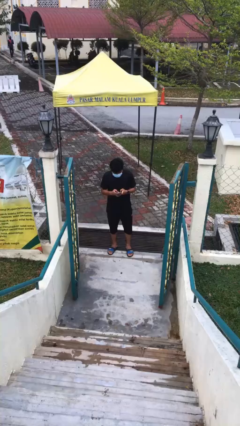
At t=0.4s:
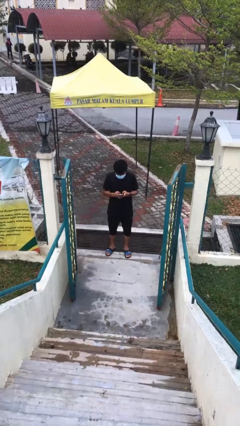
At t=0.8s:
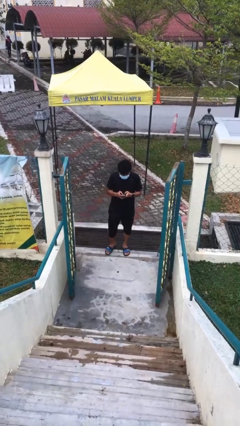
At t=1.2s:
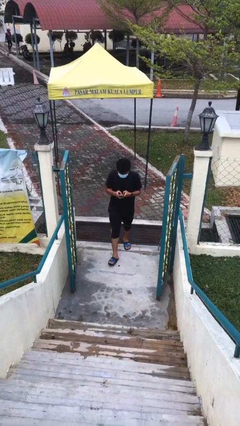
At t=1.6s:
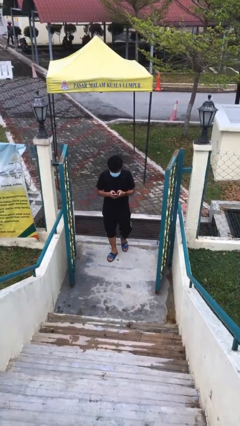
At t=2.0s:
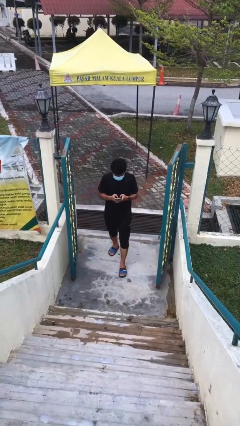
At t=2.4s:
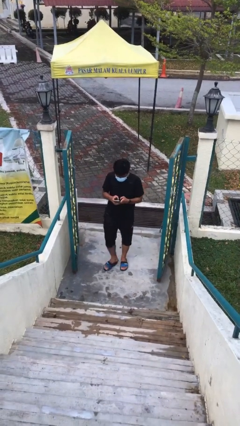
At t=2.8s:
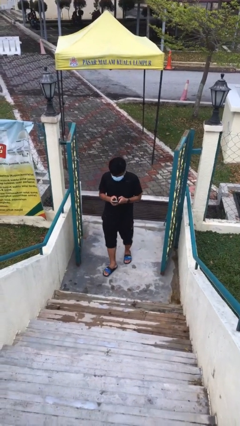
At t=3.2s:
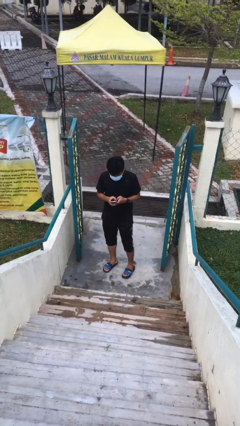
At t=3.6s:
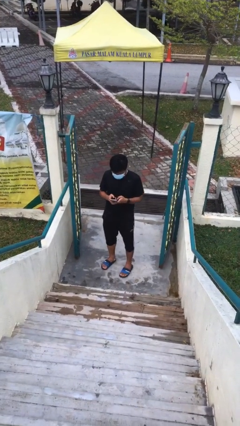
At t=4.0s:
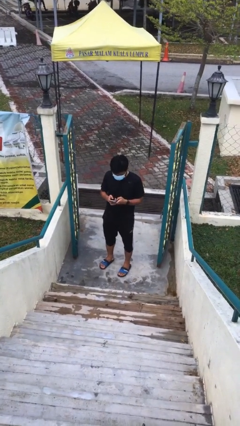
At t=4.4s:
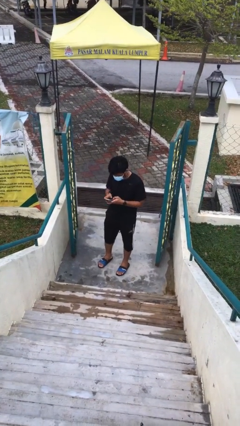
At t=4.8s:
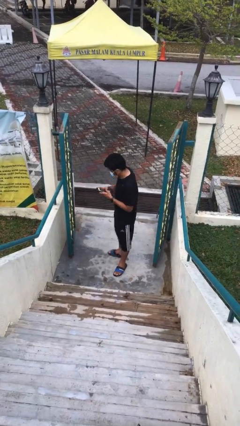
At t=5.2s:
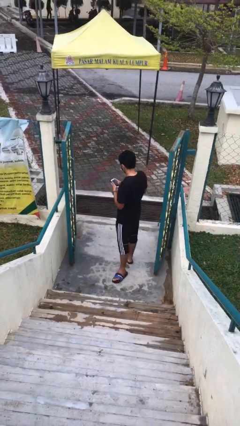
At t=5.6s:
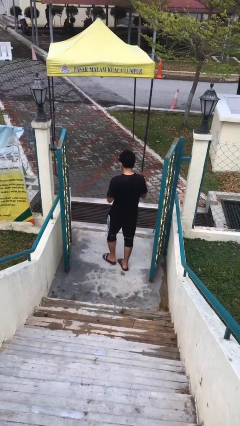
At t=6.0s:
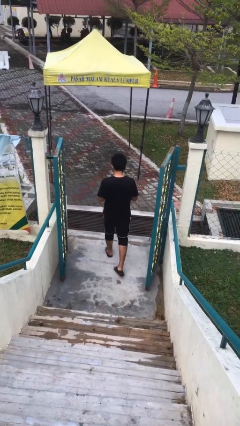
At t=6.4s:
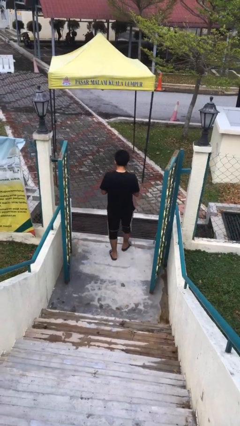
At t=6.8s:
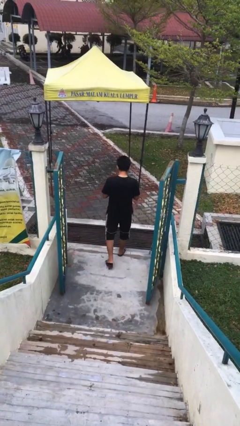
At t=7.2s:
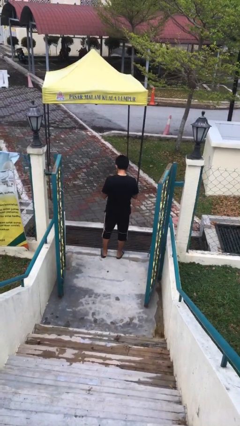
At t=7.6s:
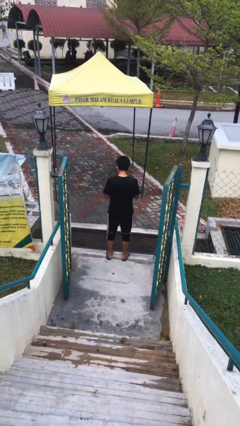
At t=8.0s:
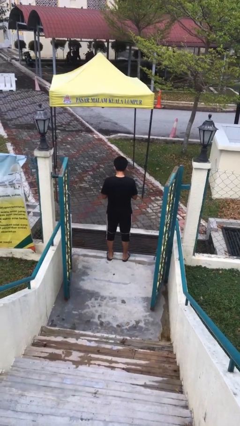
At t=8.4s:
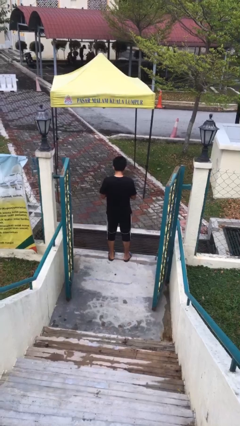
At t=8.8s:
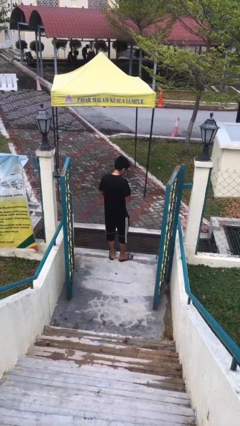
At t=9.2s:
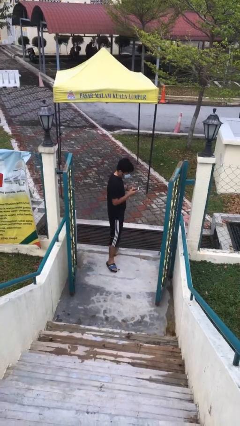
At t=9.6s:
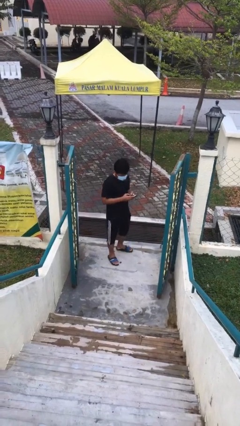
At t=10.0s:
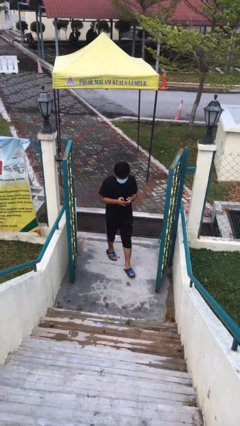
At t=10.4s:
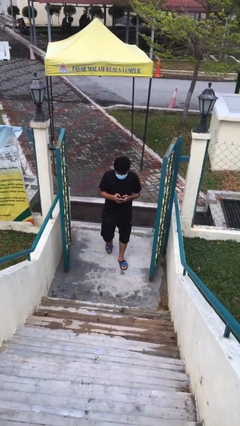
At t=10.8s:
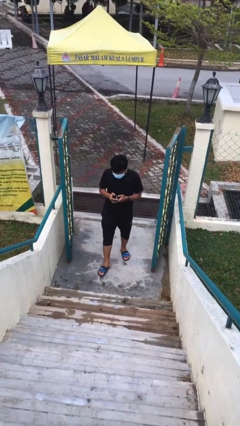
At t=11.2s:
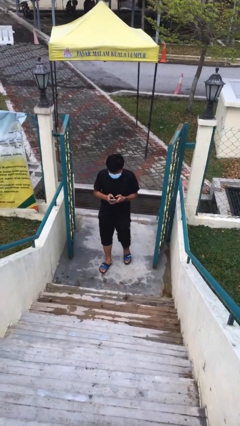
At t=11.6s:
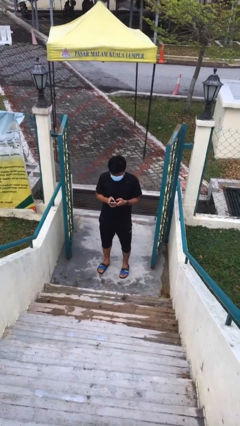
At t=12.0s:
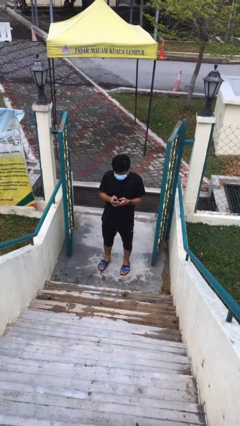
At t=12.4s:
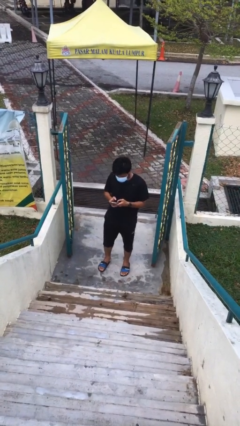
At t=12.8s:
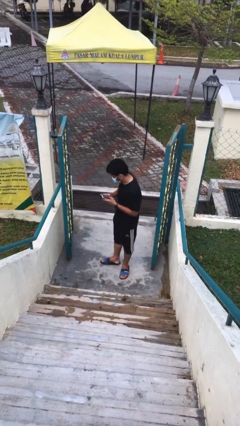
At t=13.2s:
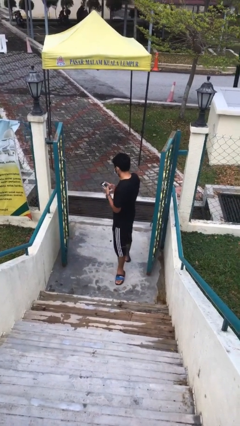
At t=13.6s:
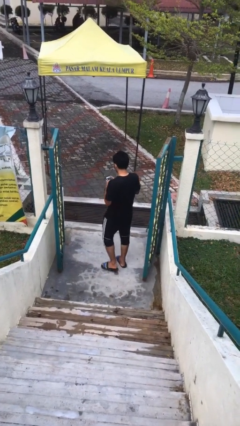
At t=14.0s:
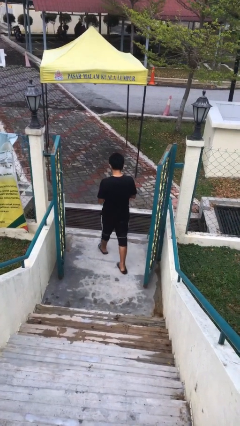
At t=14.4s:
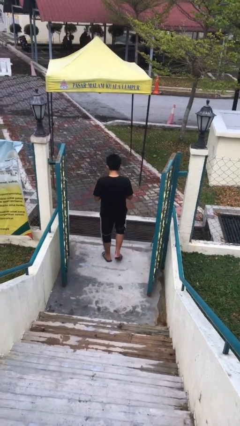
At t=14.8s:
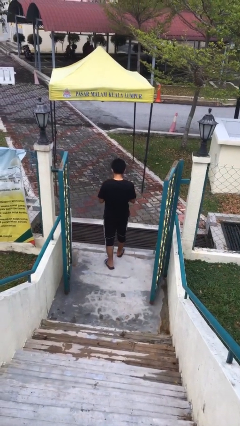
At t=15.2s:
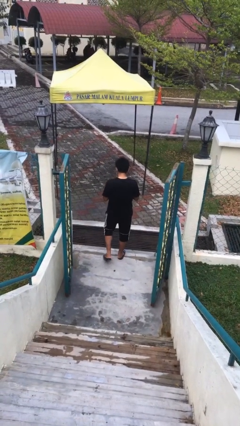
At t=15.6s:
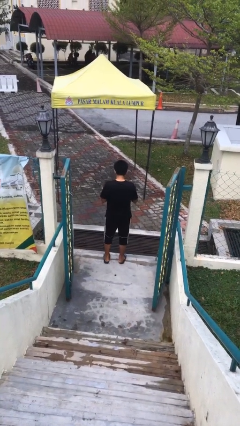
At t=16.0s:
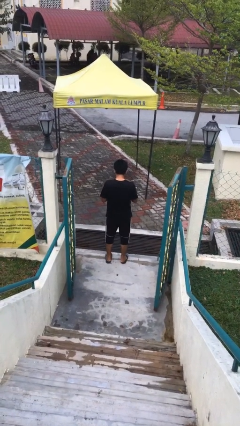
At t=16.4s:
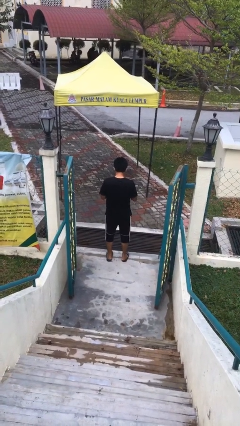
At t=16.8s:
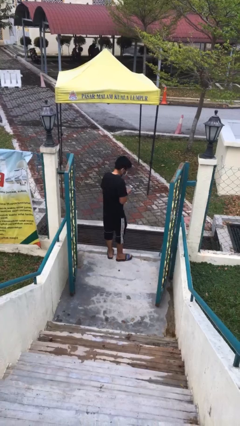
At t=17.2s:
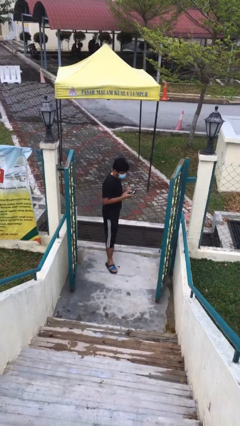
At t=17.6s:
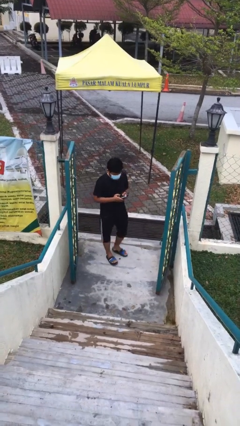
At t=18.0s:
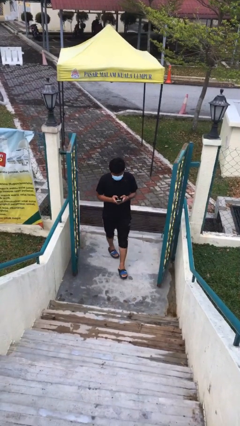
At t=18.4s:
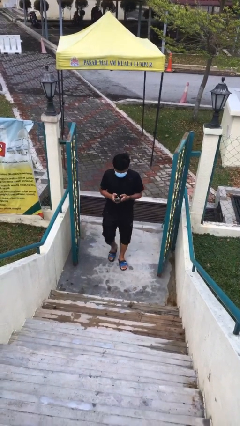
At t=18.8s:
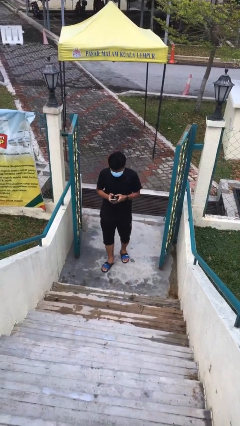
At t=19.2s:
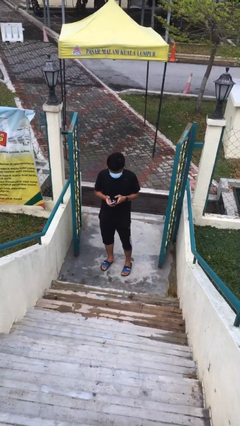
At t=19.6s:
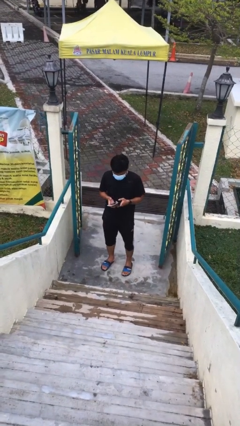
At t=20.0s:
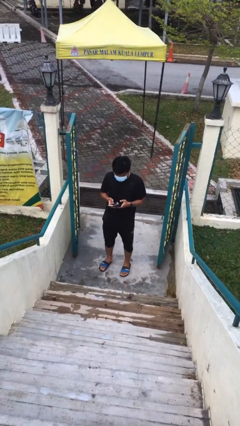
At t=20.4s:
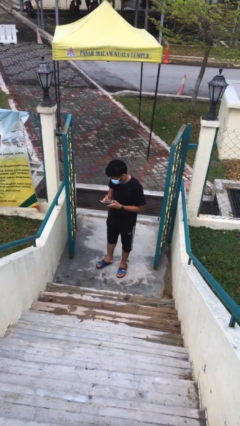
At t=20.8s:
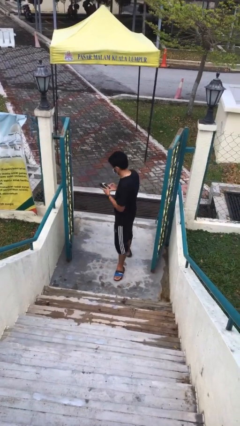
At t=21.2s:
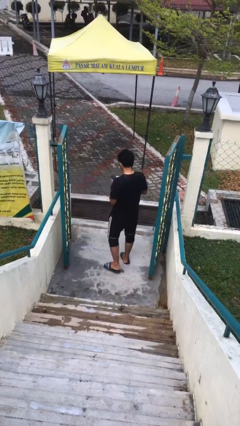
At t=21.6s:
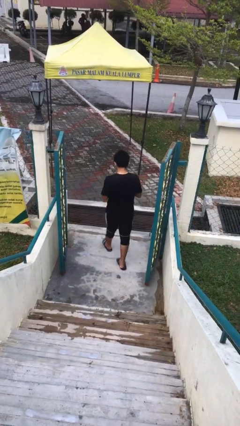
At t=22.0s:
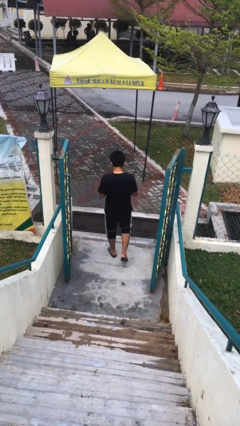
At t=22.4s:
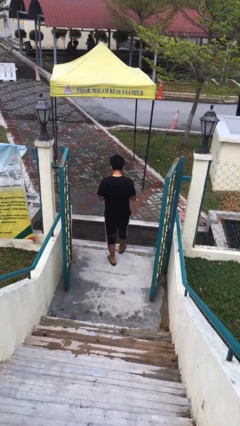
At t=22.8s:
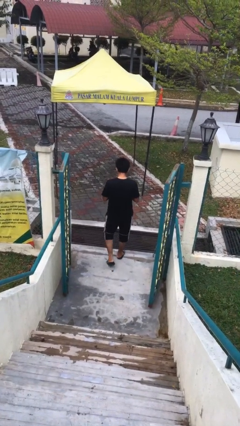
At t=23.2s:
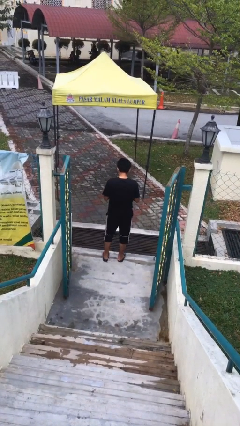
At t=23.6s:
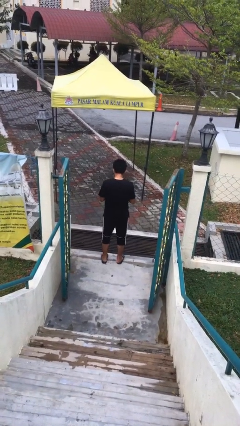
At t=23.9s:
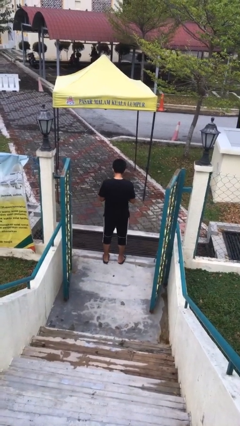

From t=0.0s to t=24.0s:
person texts on phone

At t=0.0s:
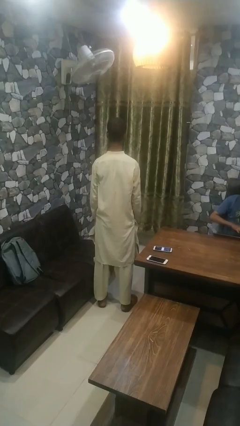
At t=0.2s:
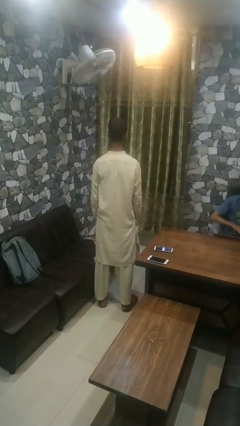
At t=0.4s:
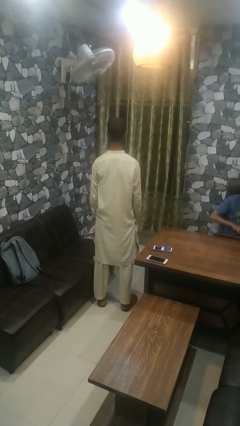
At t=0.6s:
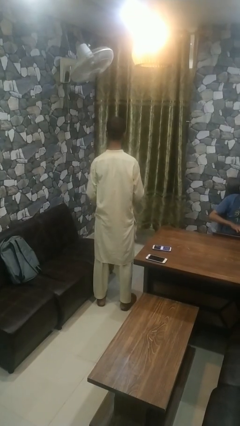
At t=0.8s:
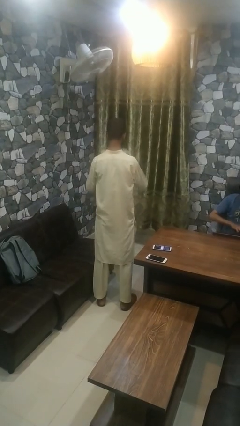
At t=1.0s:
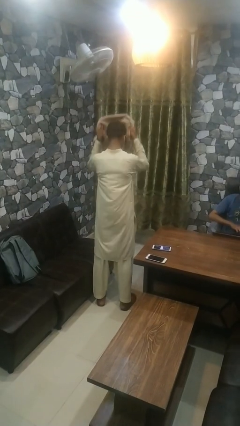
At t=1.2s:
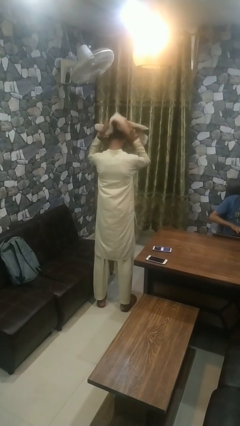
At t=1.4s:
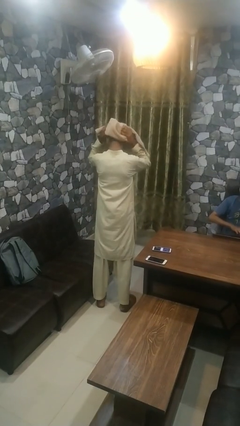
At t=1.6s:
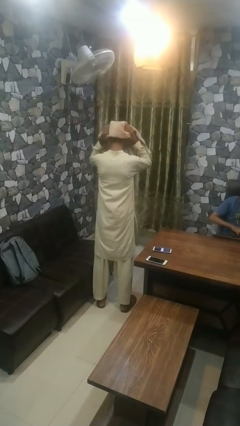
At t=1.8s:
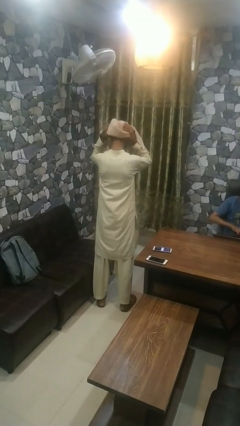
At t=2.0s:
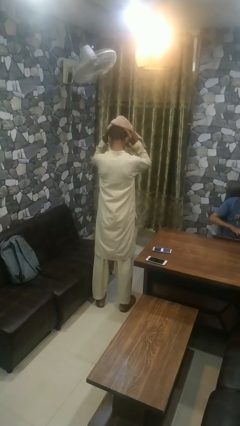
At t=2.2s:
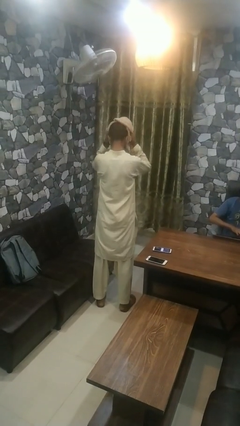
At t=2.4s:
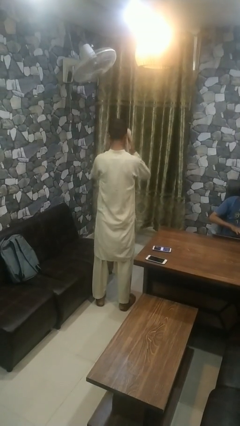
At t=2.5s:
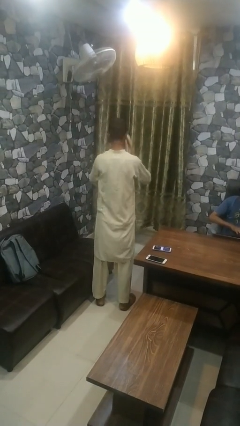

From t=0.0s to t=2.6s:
person dries hair with towel

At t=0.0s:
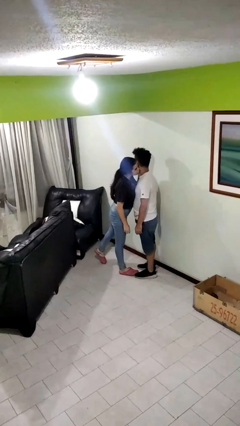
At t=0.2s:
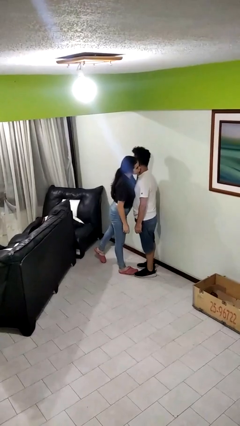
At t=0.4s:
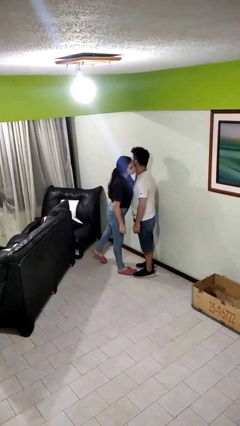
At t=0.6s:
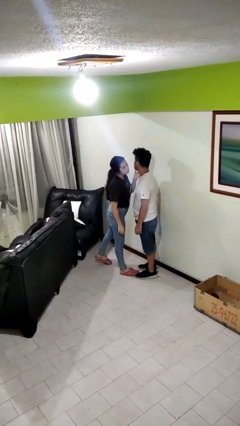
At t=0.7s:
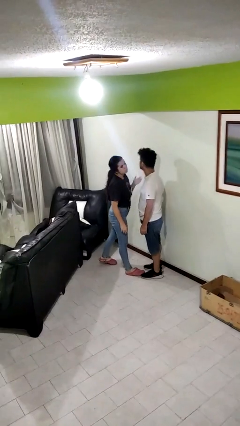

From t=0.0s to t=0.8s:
person kisses cheek of person

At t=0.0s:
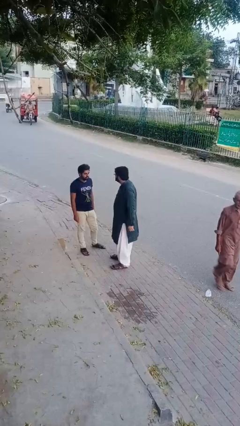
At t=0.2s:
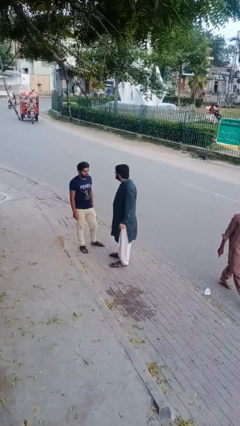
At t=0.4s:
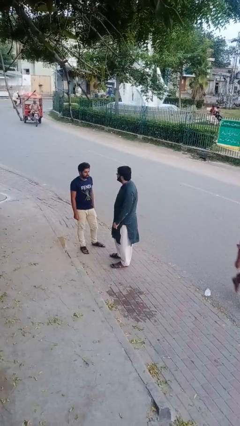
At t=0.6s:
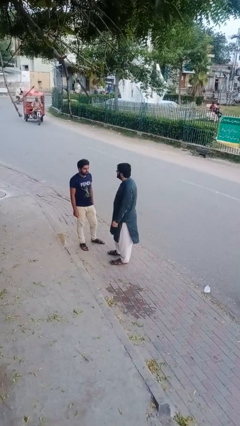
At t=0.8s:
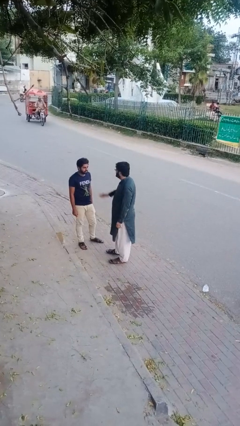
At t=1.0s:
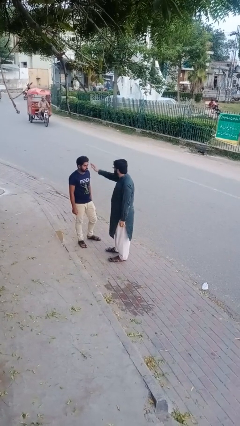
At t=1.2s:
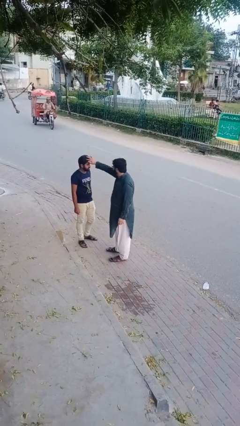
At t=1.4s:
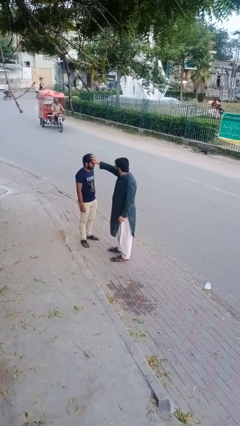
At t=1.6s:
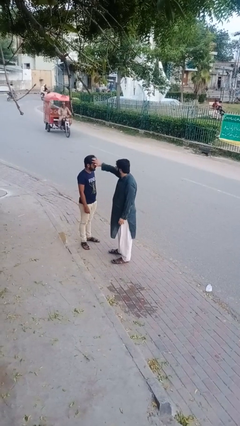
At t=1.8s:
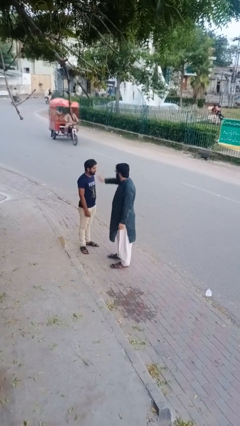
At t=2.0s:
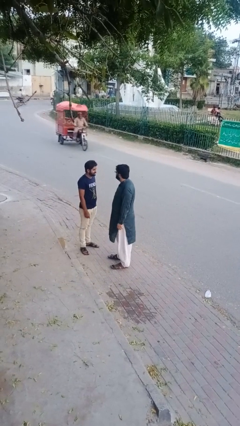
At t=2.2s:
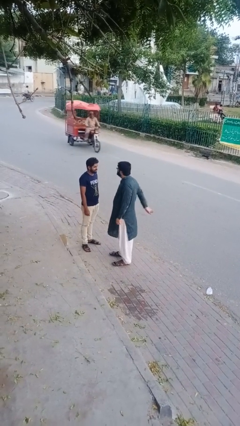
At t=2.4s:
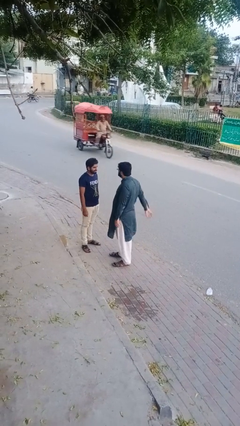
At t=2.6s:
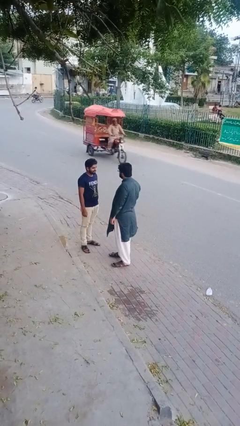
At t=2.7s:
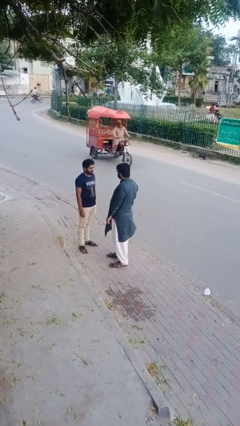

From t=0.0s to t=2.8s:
person grabs person by hair
